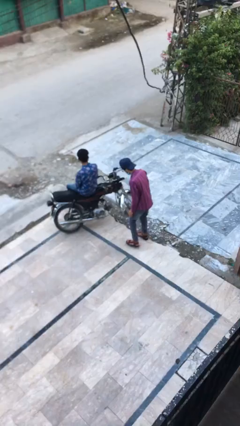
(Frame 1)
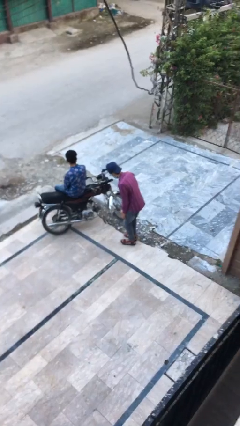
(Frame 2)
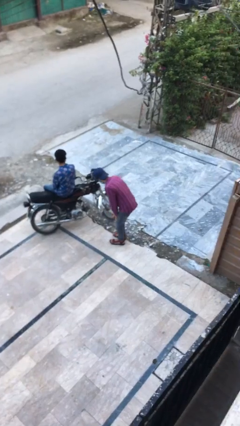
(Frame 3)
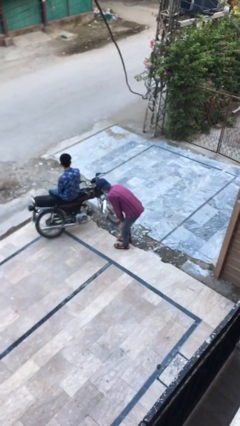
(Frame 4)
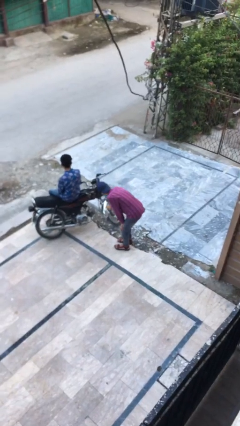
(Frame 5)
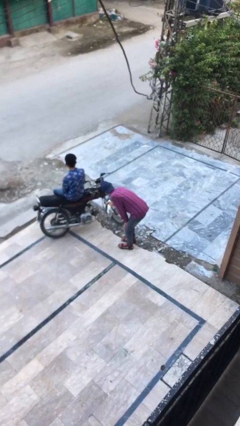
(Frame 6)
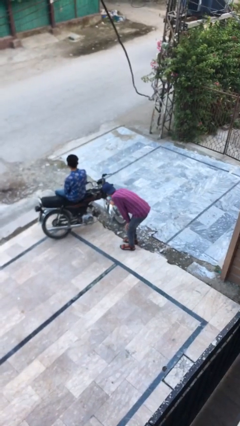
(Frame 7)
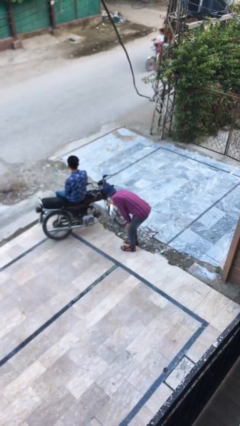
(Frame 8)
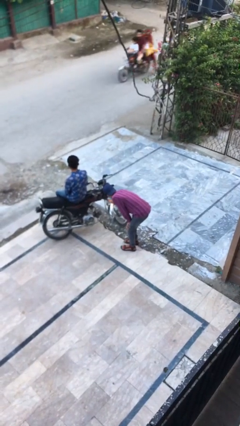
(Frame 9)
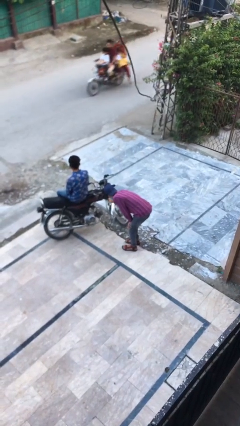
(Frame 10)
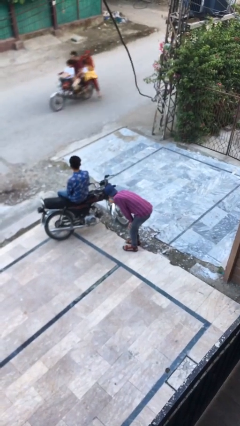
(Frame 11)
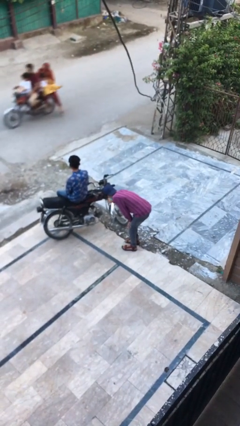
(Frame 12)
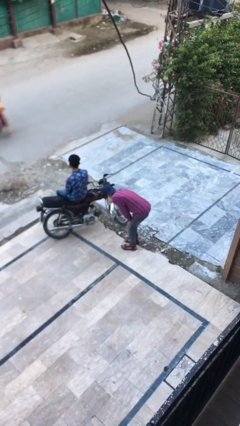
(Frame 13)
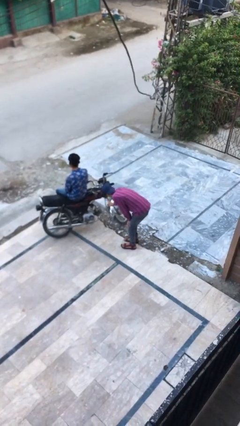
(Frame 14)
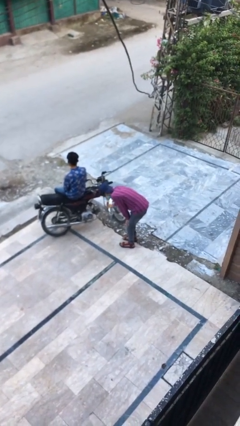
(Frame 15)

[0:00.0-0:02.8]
person steals object from person

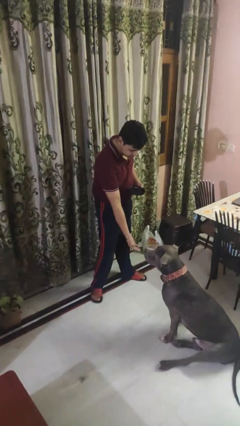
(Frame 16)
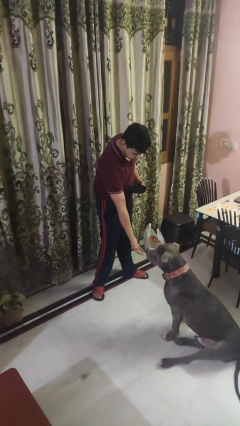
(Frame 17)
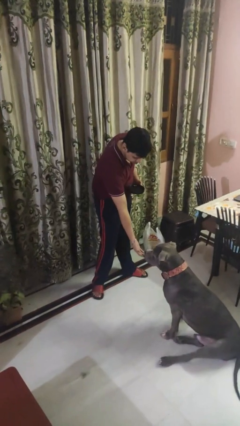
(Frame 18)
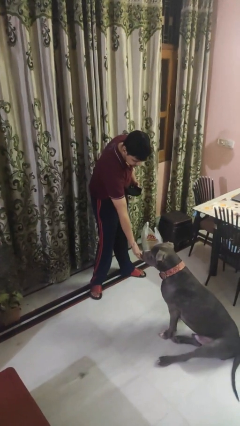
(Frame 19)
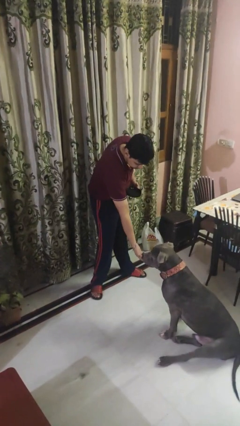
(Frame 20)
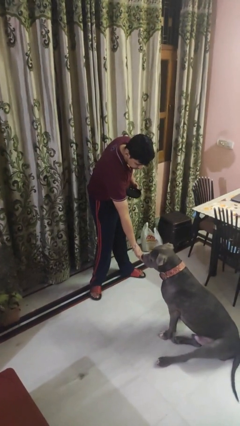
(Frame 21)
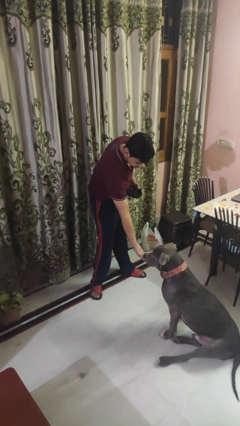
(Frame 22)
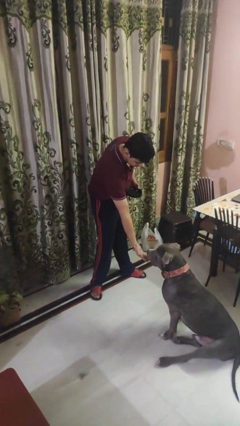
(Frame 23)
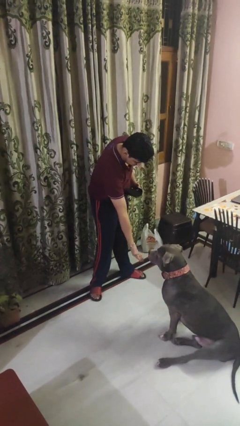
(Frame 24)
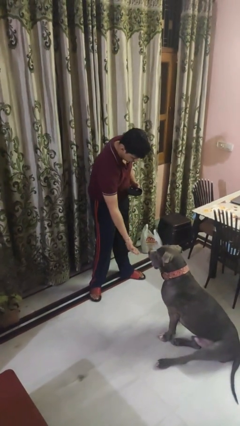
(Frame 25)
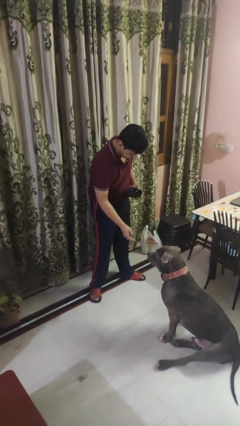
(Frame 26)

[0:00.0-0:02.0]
person feeds dog

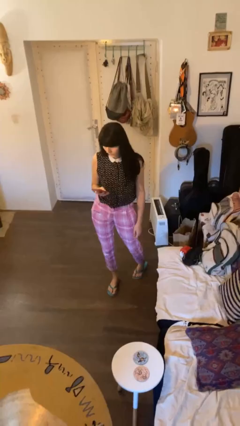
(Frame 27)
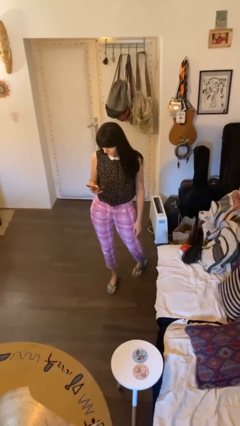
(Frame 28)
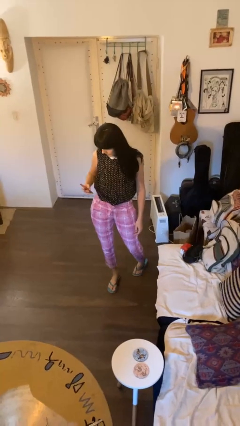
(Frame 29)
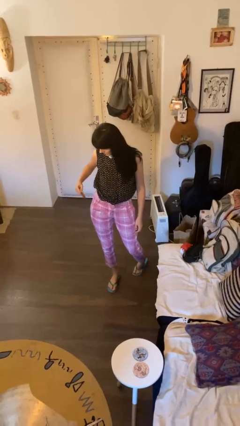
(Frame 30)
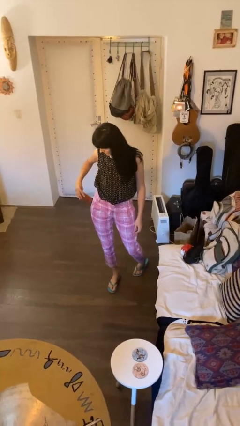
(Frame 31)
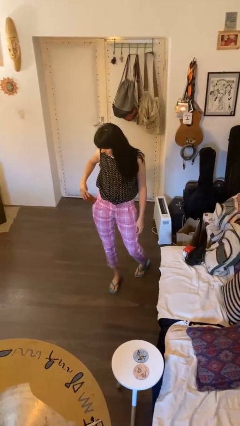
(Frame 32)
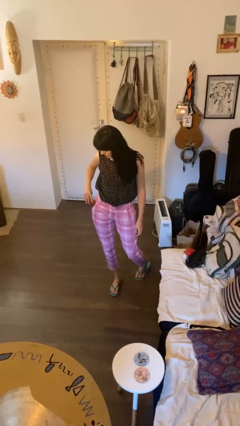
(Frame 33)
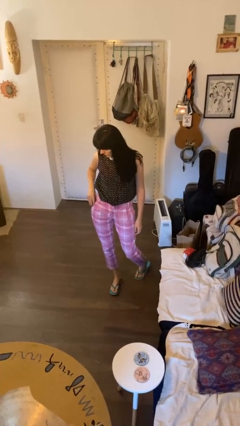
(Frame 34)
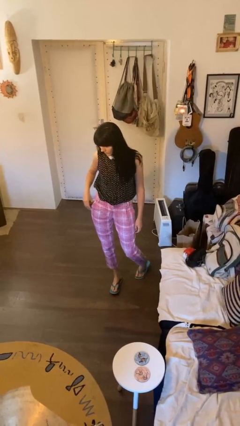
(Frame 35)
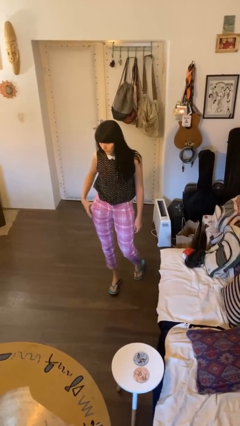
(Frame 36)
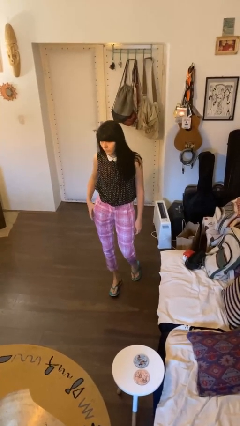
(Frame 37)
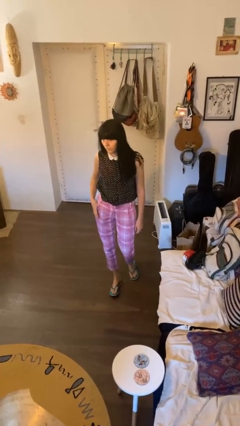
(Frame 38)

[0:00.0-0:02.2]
person puts phone into pocket

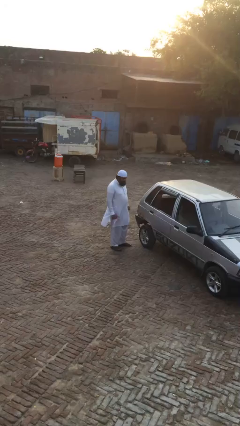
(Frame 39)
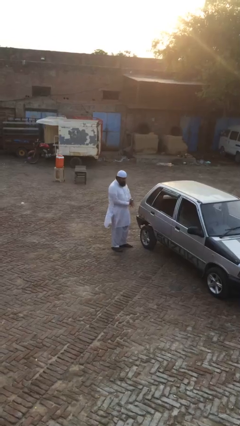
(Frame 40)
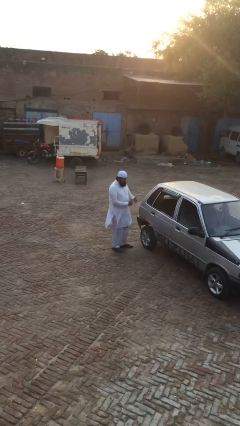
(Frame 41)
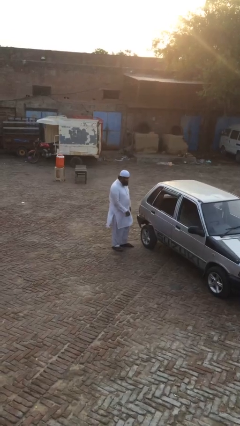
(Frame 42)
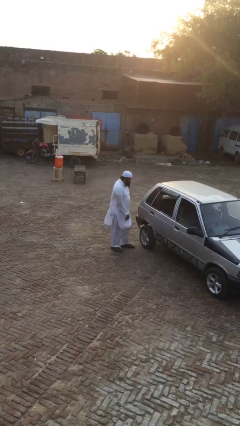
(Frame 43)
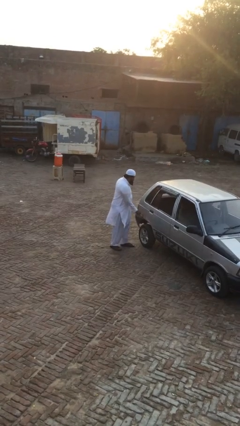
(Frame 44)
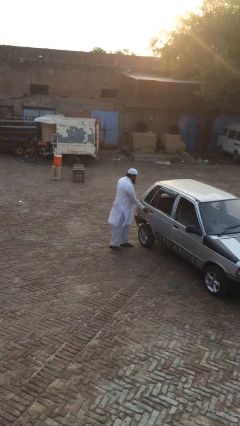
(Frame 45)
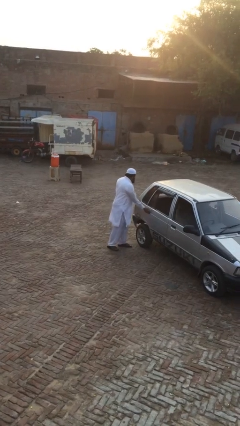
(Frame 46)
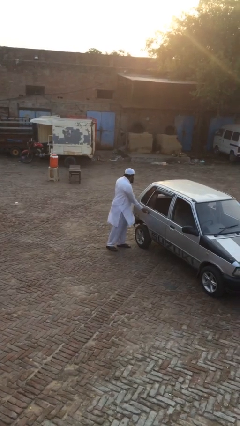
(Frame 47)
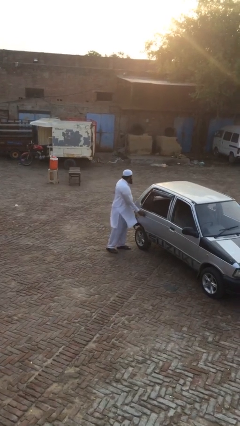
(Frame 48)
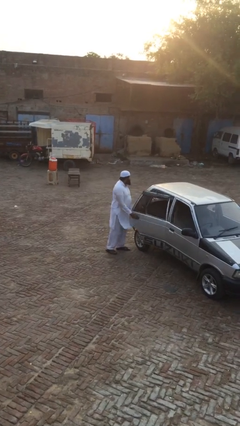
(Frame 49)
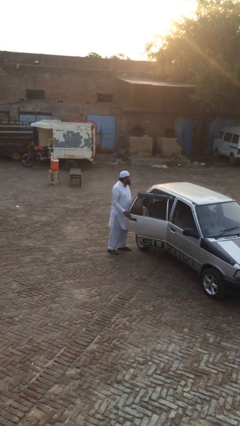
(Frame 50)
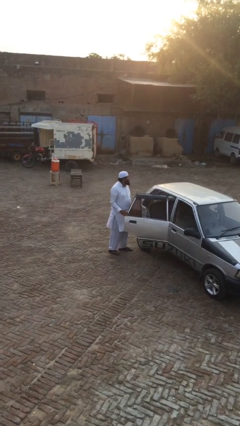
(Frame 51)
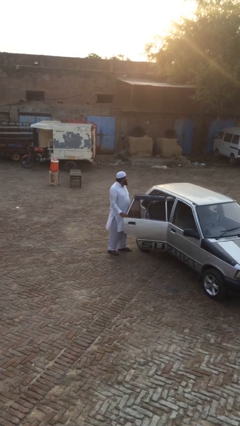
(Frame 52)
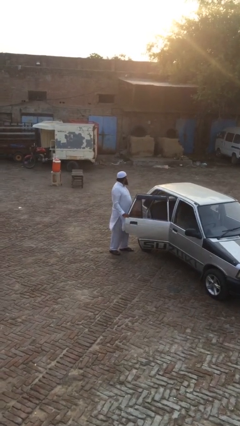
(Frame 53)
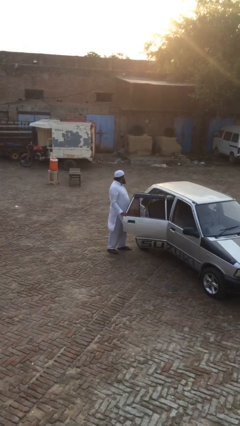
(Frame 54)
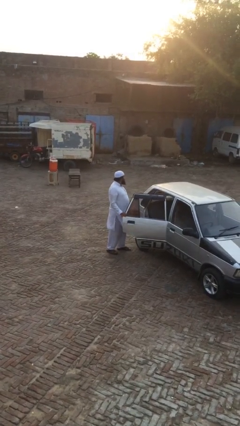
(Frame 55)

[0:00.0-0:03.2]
person opens car door

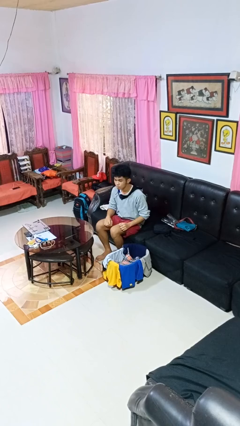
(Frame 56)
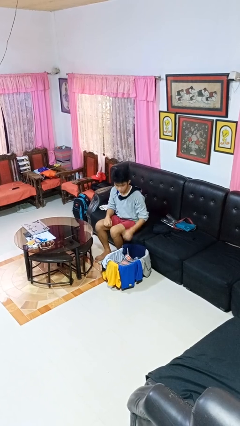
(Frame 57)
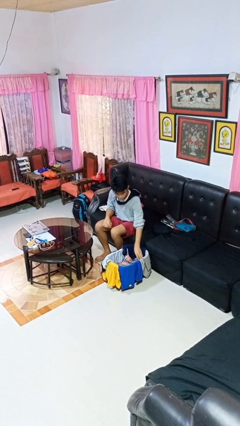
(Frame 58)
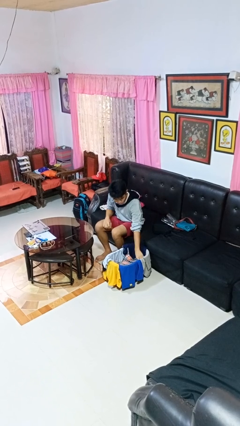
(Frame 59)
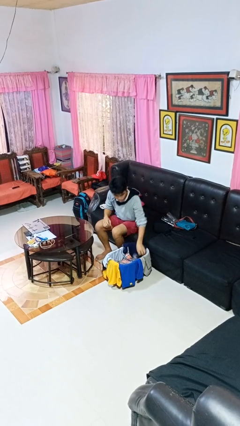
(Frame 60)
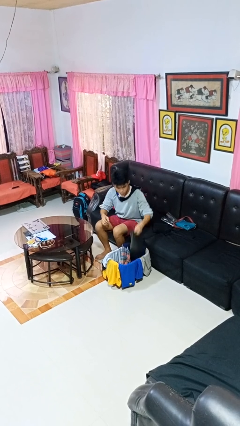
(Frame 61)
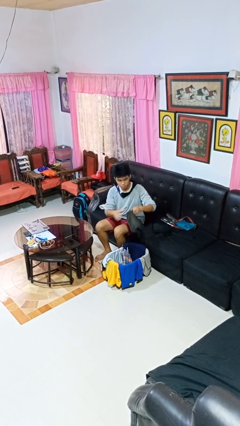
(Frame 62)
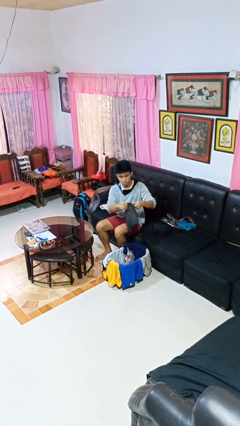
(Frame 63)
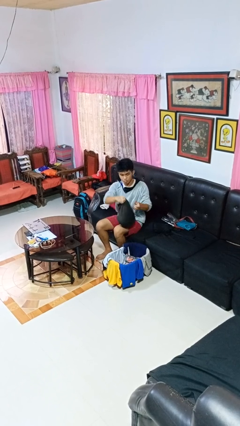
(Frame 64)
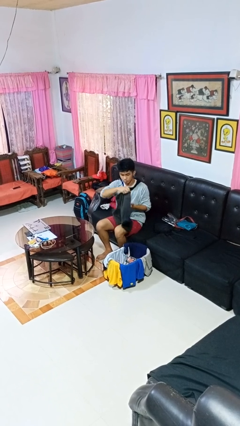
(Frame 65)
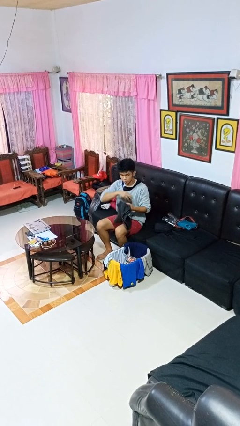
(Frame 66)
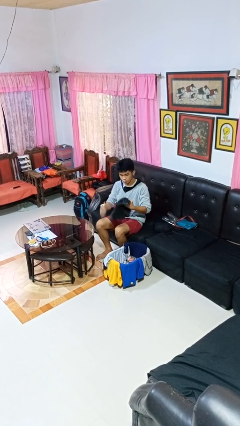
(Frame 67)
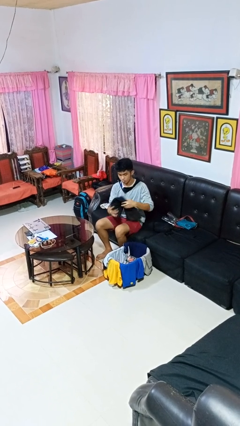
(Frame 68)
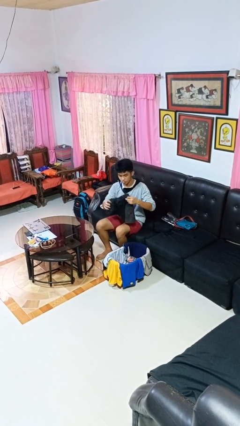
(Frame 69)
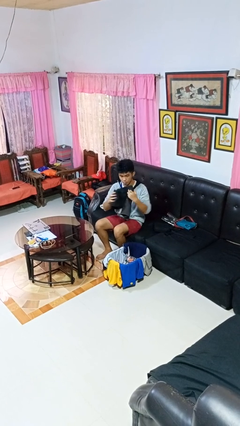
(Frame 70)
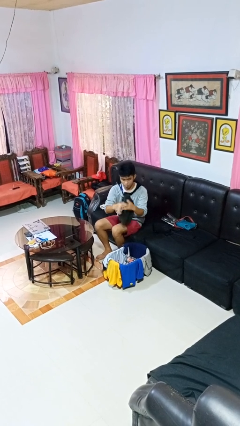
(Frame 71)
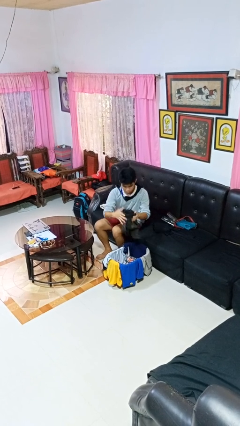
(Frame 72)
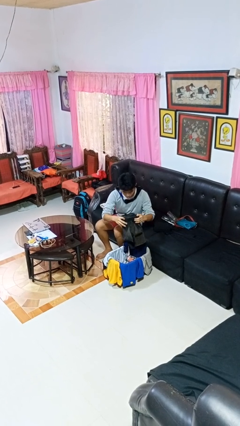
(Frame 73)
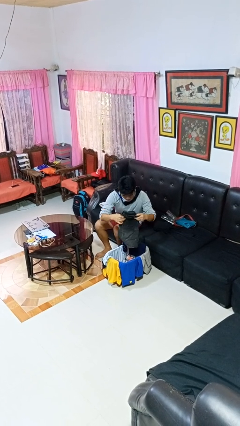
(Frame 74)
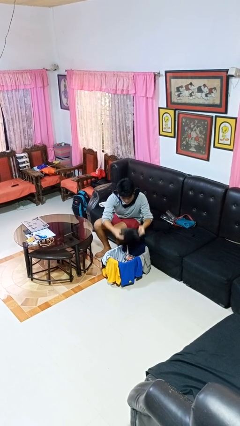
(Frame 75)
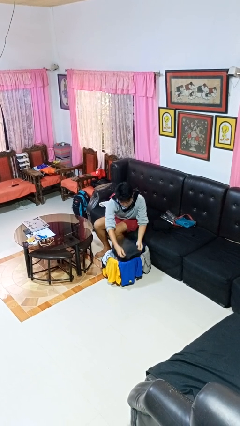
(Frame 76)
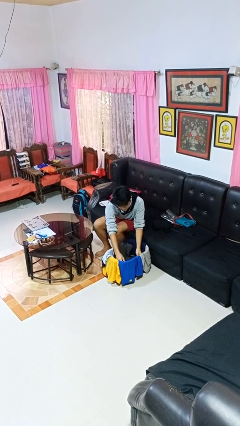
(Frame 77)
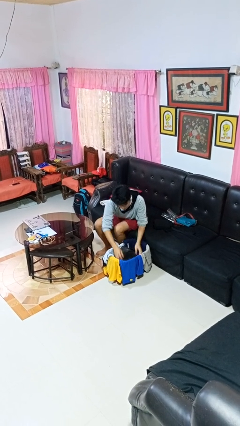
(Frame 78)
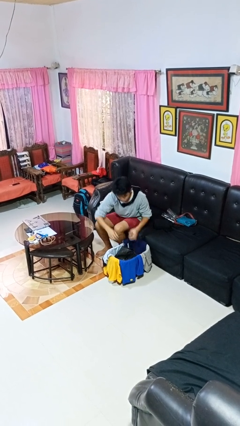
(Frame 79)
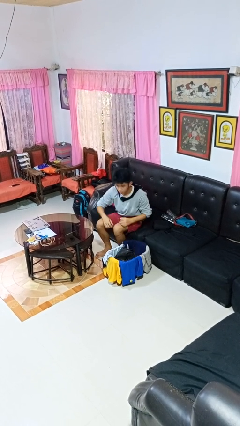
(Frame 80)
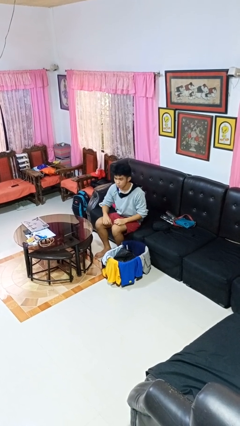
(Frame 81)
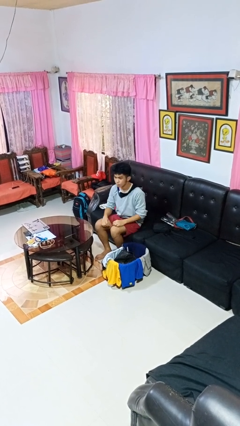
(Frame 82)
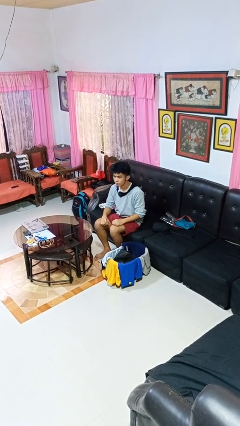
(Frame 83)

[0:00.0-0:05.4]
person folds pants

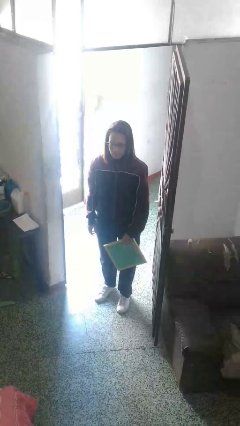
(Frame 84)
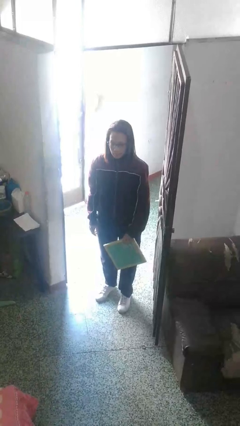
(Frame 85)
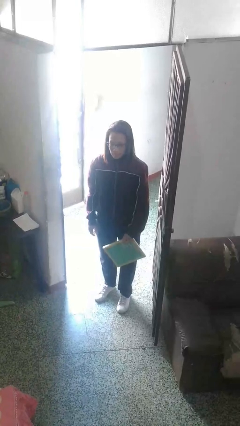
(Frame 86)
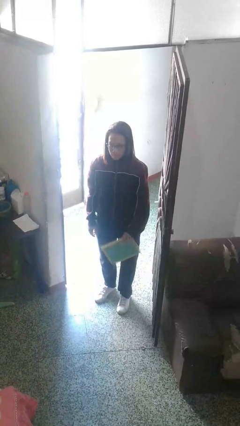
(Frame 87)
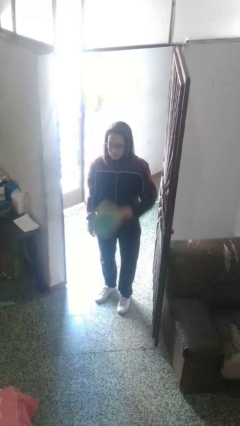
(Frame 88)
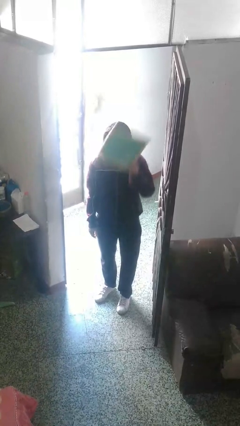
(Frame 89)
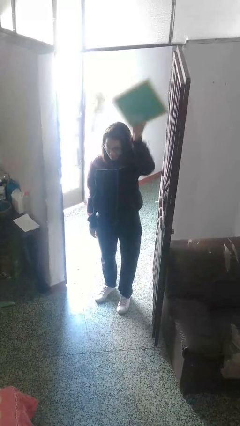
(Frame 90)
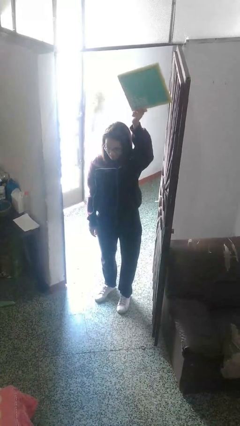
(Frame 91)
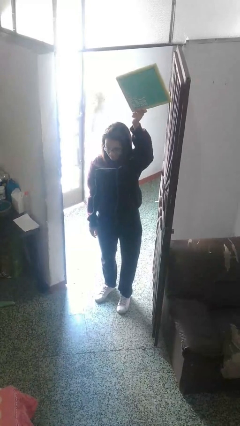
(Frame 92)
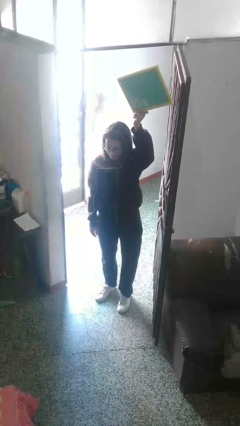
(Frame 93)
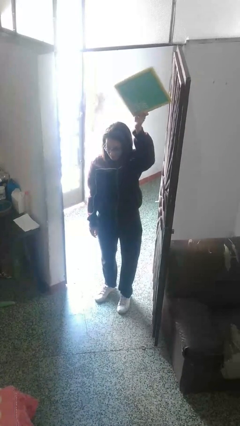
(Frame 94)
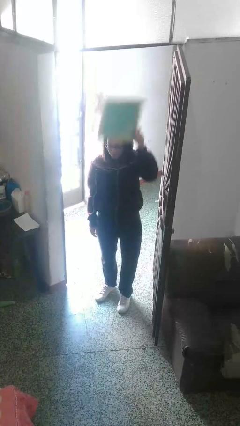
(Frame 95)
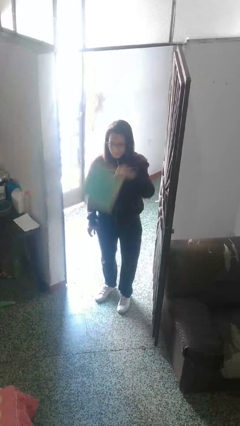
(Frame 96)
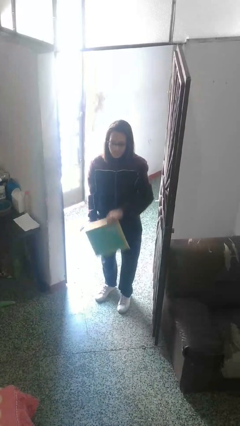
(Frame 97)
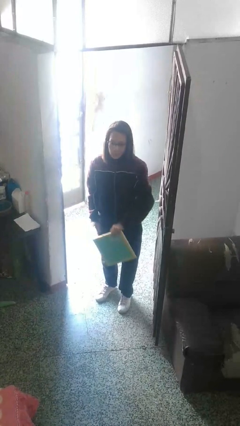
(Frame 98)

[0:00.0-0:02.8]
person holds object above head
